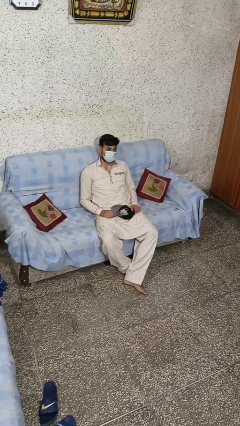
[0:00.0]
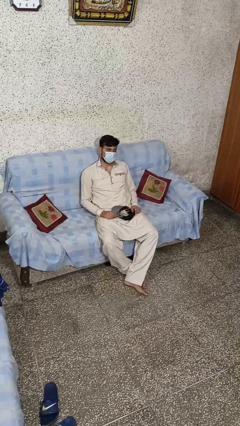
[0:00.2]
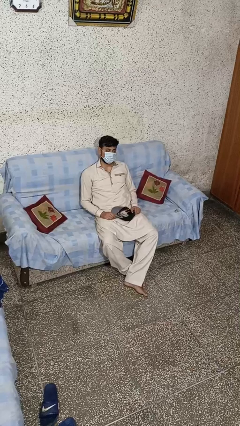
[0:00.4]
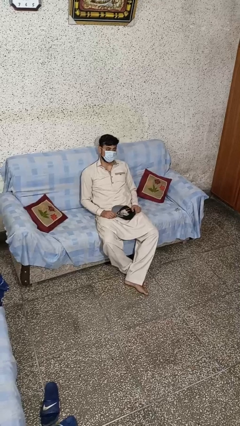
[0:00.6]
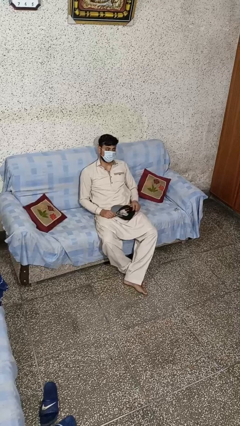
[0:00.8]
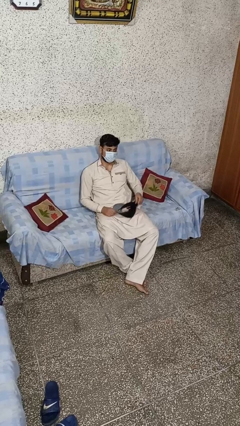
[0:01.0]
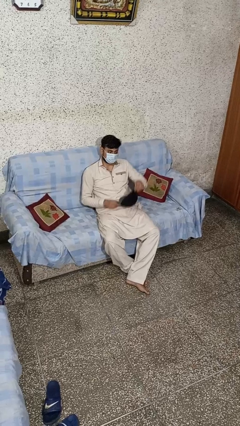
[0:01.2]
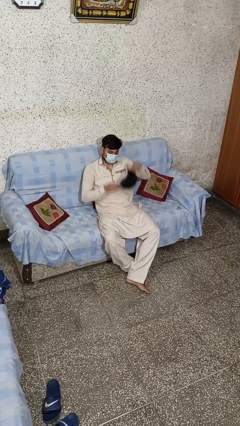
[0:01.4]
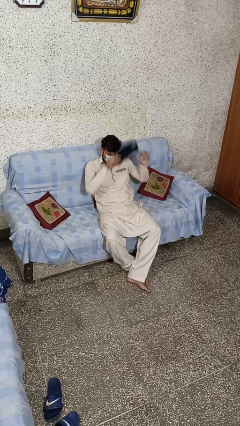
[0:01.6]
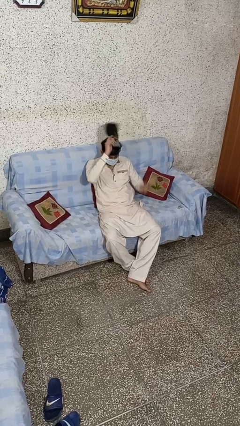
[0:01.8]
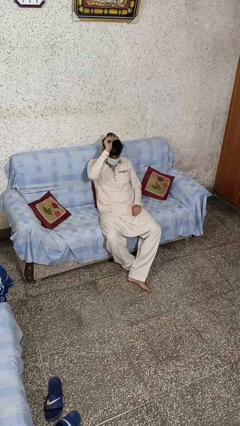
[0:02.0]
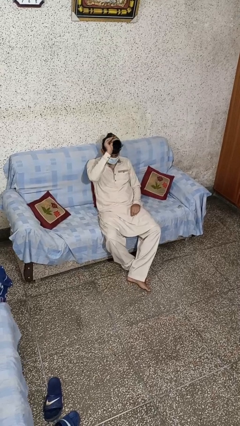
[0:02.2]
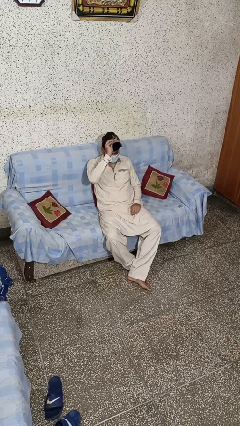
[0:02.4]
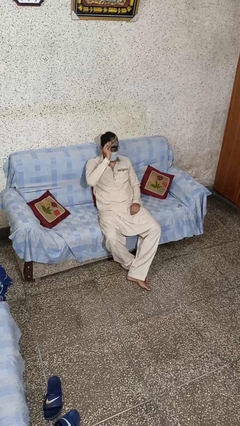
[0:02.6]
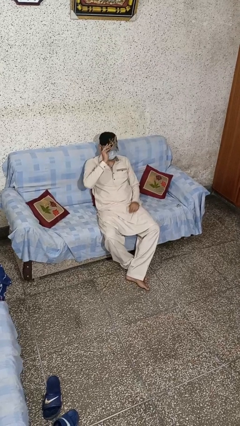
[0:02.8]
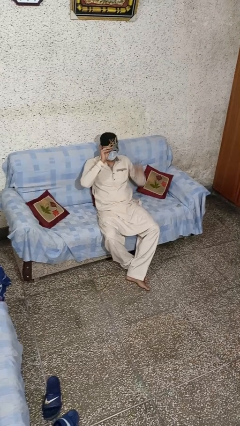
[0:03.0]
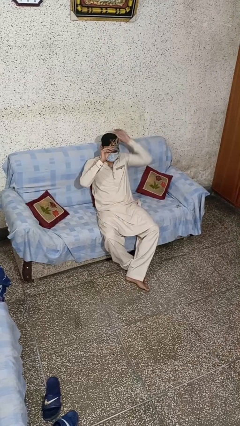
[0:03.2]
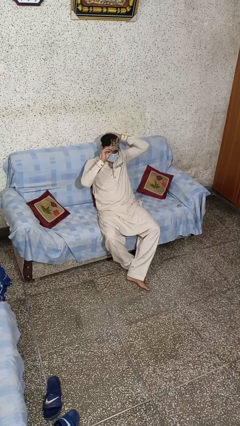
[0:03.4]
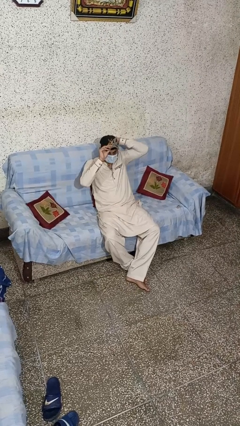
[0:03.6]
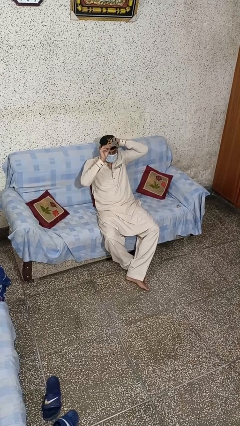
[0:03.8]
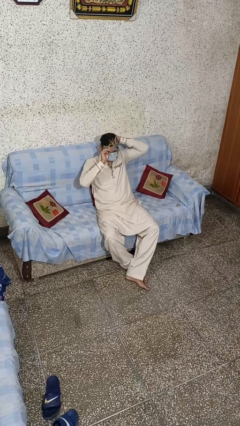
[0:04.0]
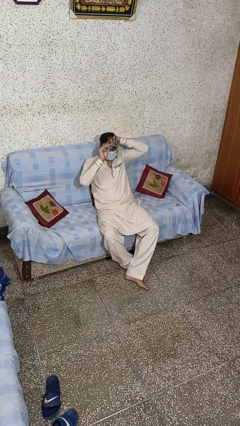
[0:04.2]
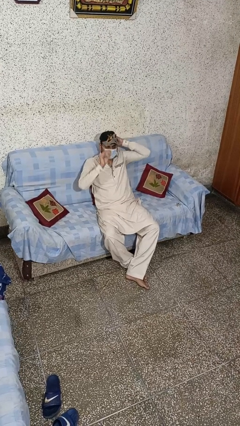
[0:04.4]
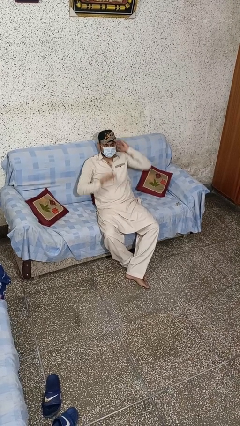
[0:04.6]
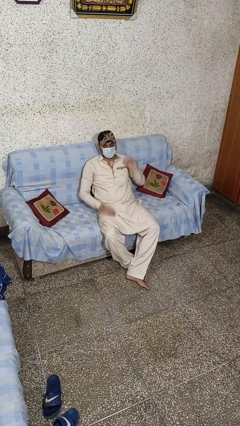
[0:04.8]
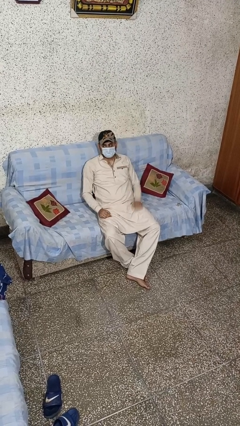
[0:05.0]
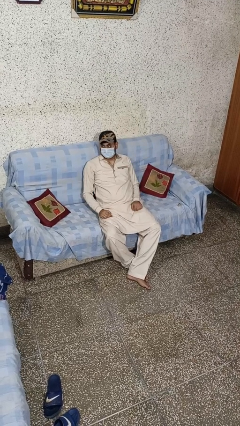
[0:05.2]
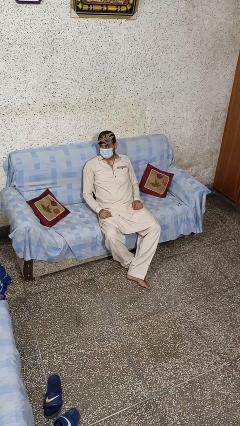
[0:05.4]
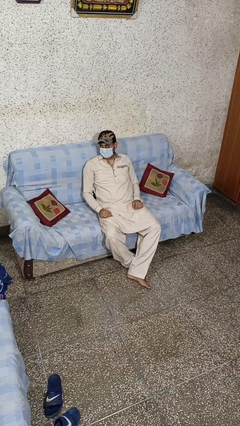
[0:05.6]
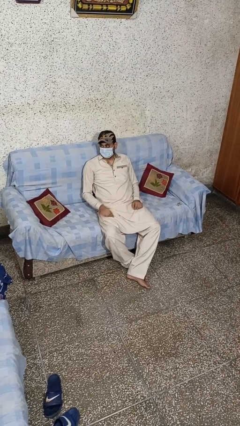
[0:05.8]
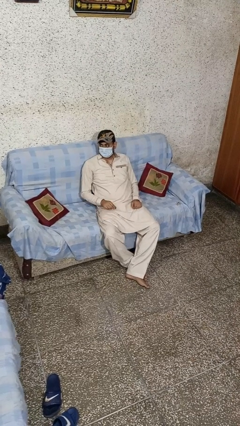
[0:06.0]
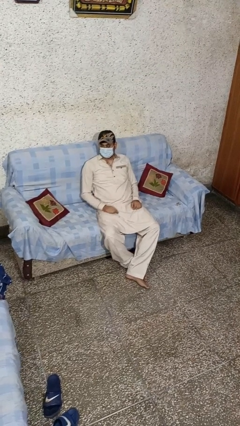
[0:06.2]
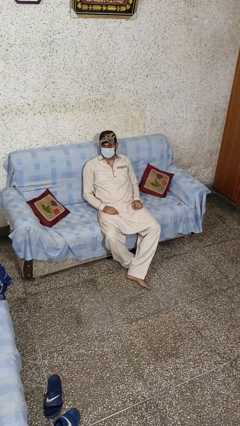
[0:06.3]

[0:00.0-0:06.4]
person puts on hat

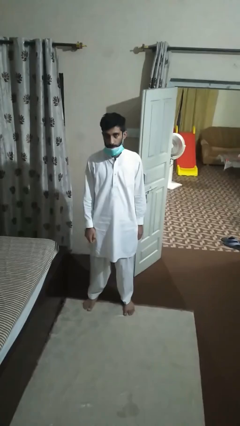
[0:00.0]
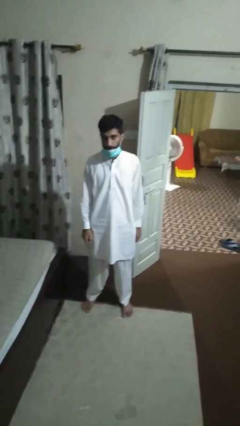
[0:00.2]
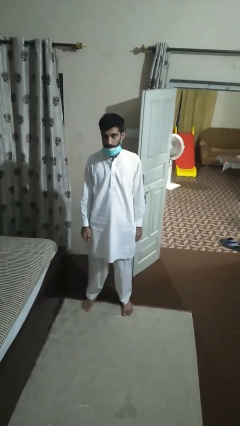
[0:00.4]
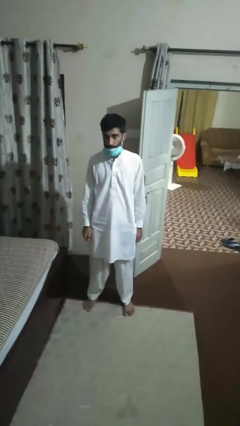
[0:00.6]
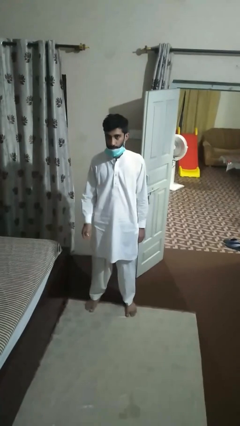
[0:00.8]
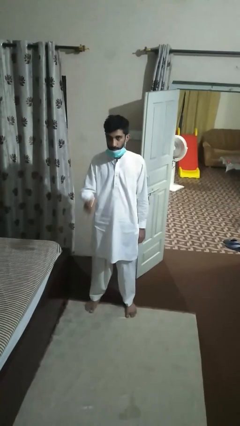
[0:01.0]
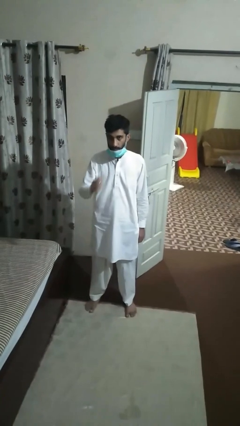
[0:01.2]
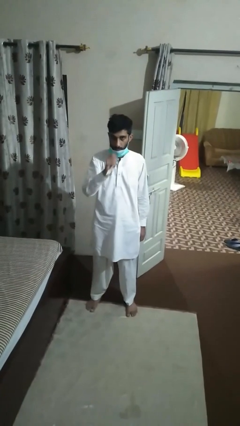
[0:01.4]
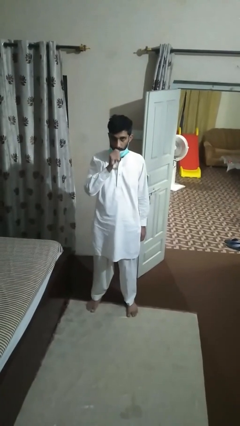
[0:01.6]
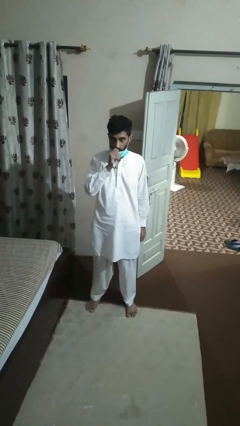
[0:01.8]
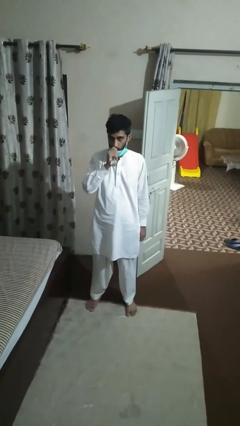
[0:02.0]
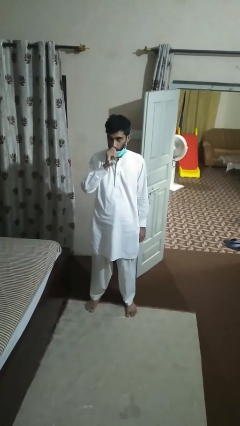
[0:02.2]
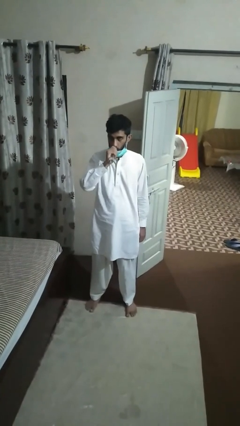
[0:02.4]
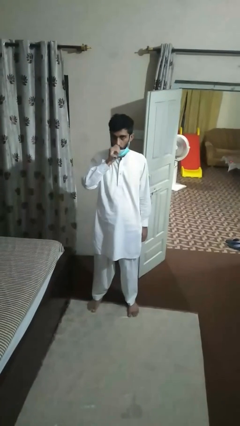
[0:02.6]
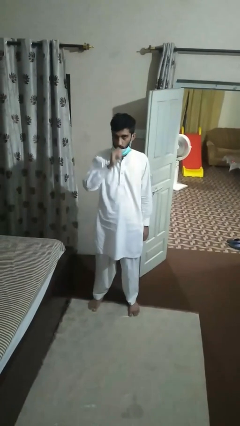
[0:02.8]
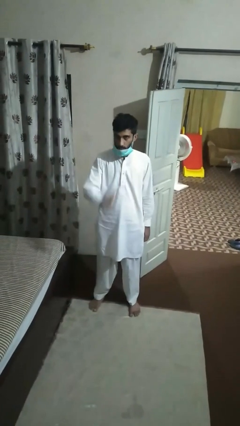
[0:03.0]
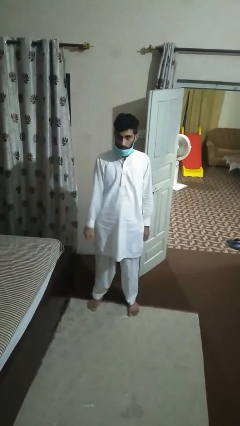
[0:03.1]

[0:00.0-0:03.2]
person vapes

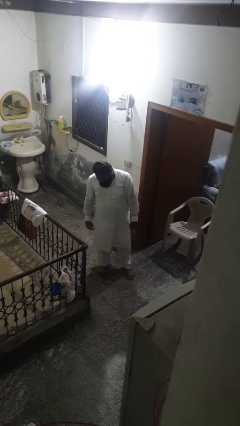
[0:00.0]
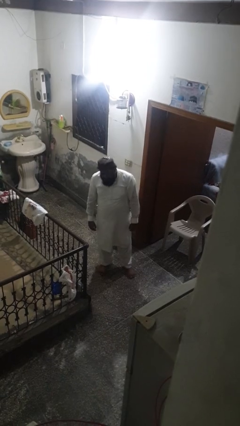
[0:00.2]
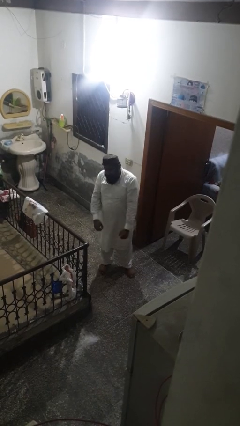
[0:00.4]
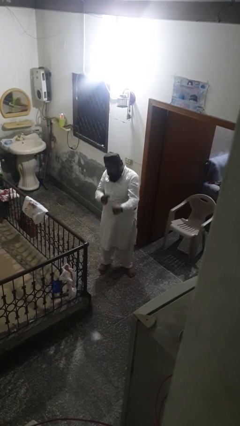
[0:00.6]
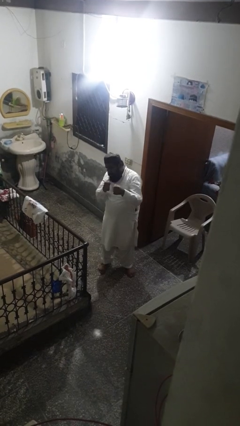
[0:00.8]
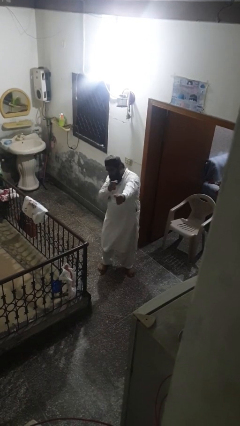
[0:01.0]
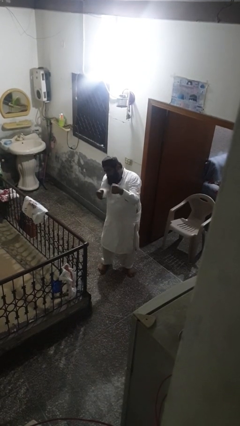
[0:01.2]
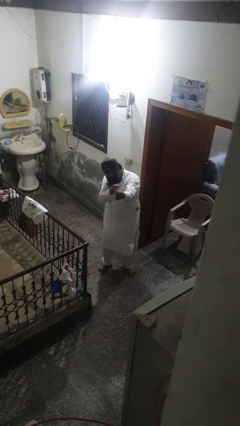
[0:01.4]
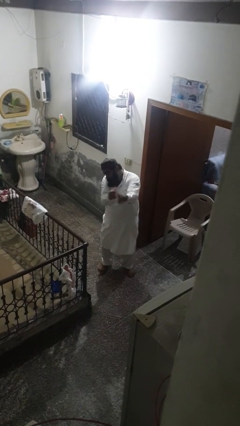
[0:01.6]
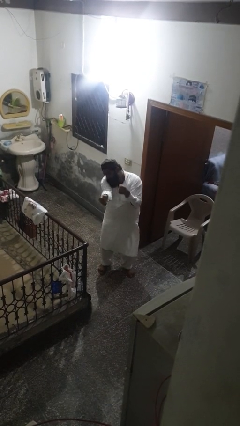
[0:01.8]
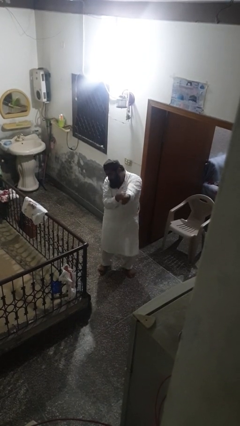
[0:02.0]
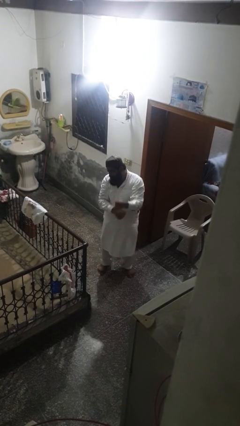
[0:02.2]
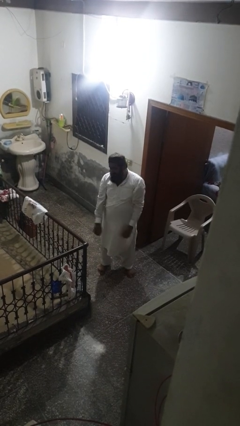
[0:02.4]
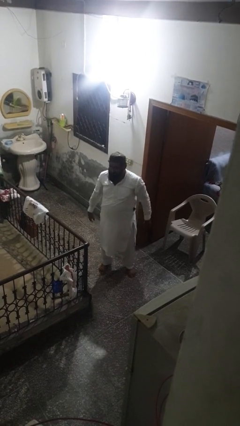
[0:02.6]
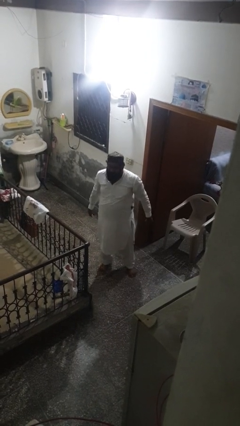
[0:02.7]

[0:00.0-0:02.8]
person punches

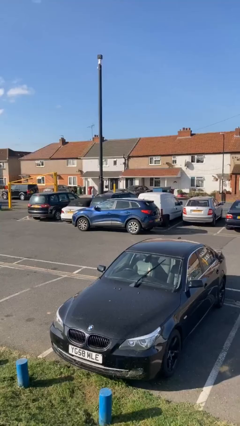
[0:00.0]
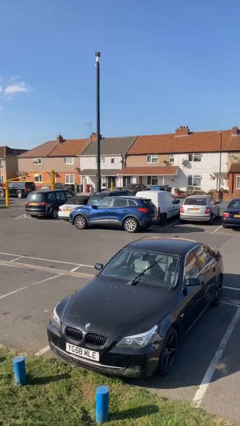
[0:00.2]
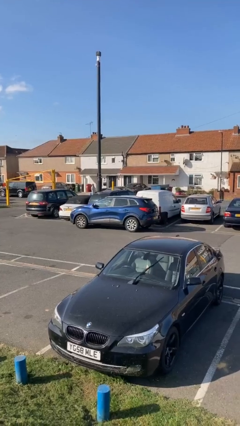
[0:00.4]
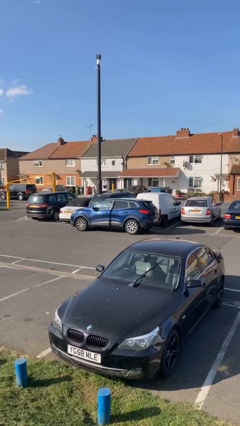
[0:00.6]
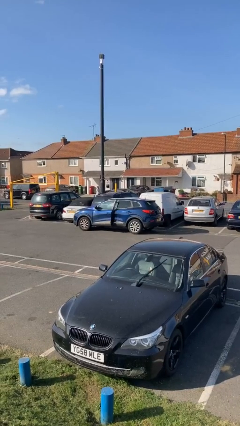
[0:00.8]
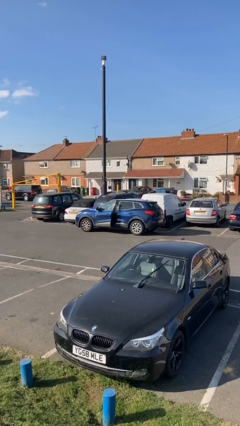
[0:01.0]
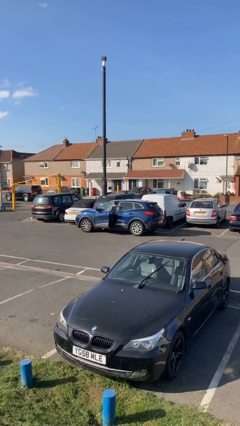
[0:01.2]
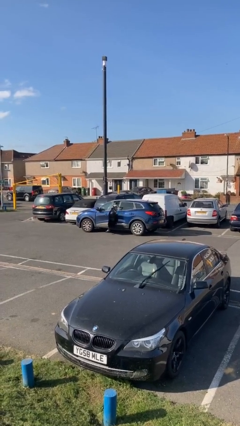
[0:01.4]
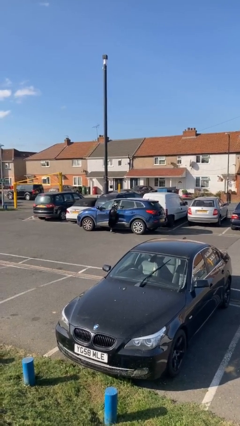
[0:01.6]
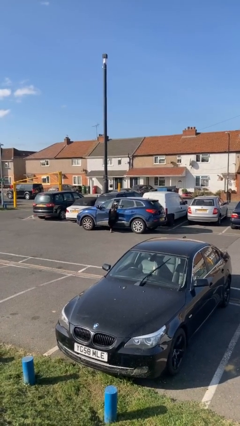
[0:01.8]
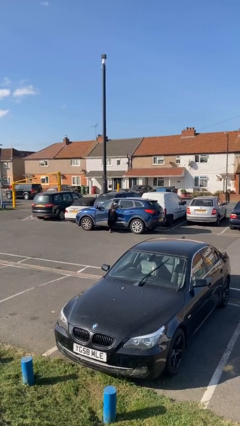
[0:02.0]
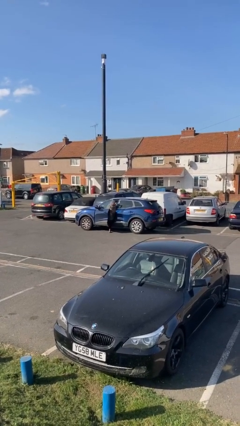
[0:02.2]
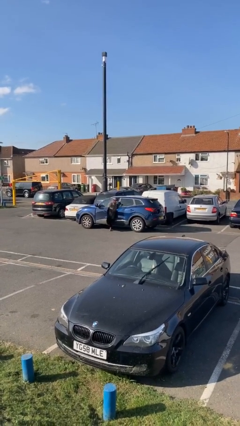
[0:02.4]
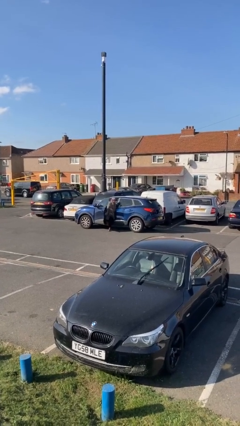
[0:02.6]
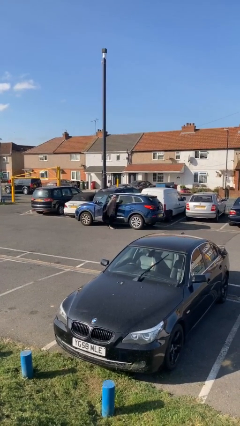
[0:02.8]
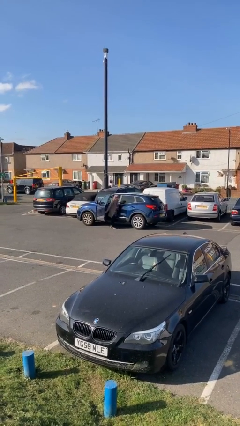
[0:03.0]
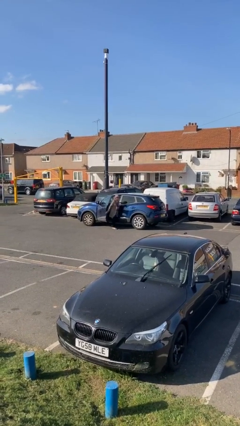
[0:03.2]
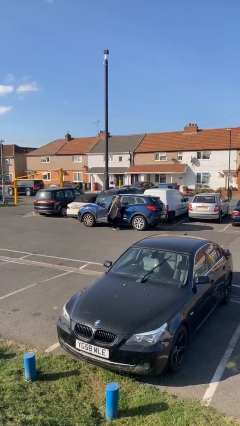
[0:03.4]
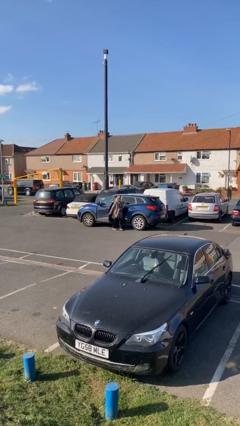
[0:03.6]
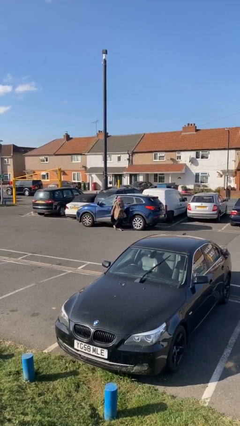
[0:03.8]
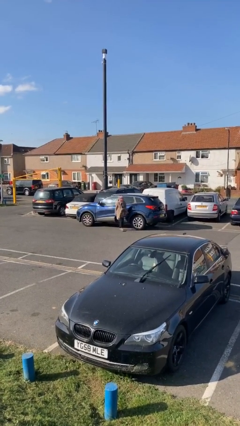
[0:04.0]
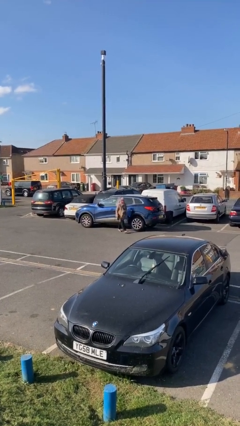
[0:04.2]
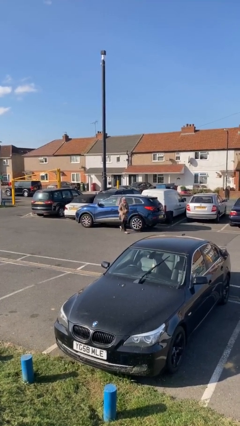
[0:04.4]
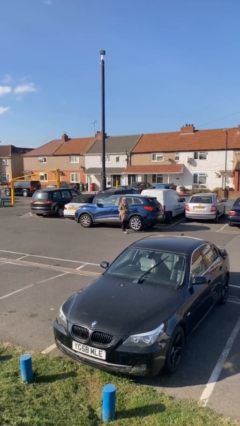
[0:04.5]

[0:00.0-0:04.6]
car drops off person

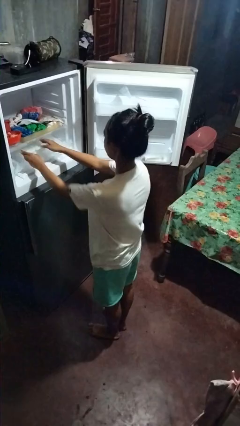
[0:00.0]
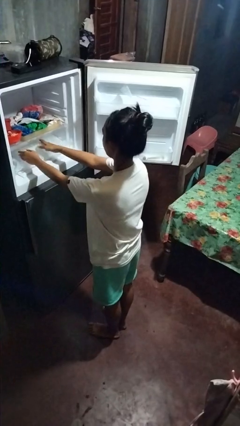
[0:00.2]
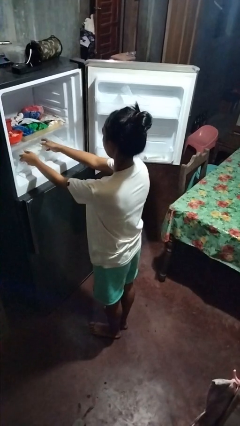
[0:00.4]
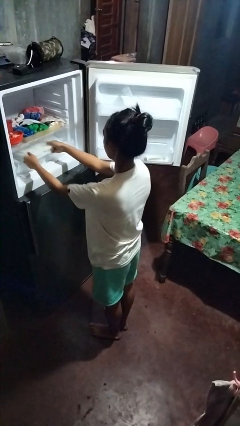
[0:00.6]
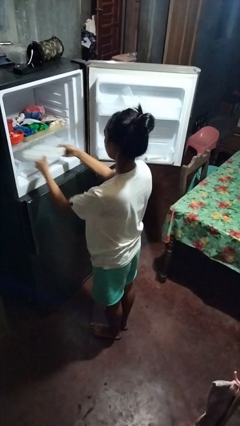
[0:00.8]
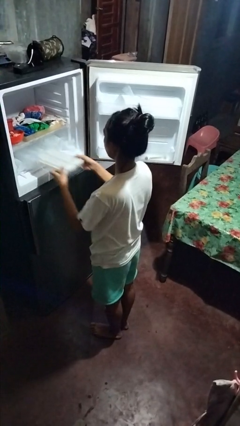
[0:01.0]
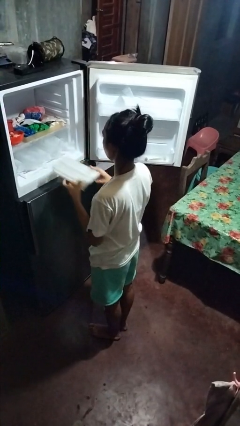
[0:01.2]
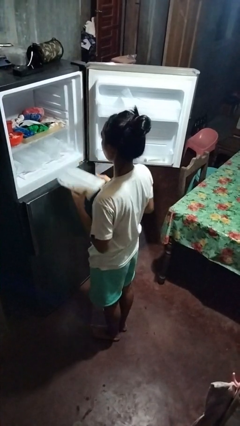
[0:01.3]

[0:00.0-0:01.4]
person takes object from refrigerator
